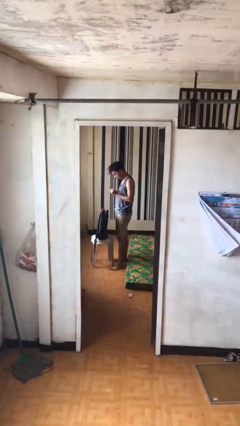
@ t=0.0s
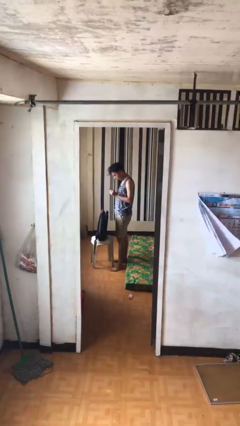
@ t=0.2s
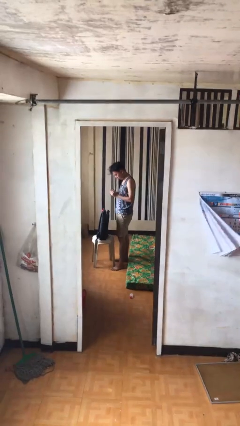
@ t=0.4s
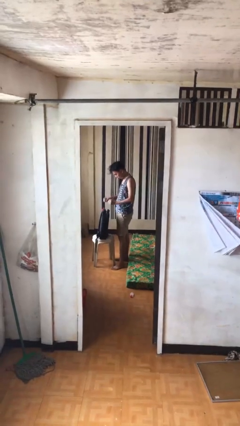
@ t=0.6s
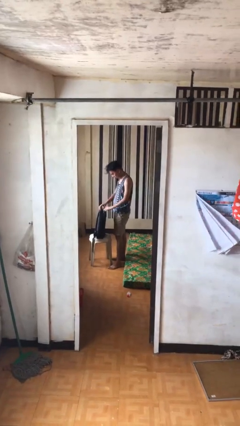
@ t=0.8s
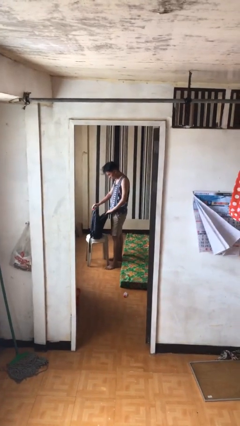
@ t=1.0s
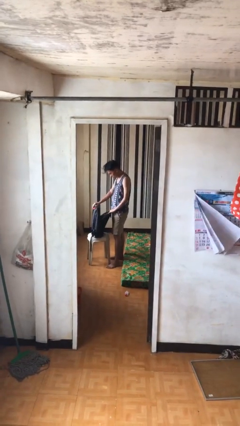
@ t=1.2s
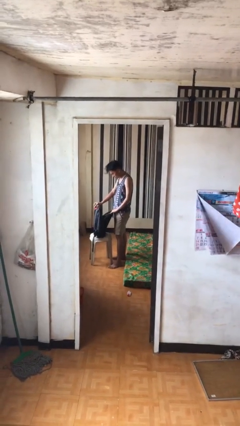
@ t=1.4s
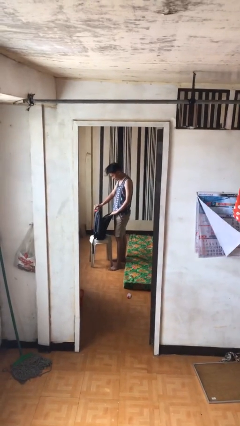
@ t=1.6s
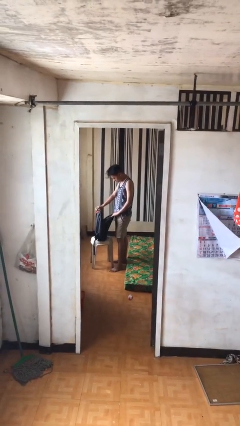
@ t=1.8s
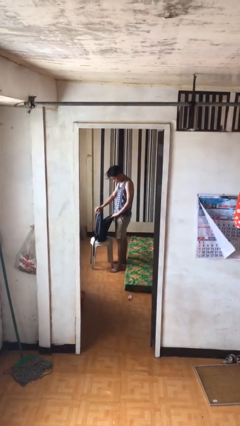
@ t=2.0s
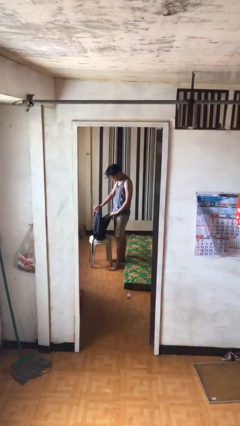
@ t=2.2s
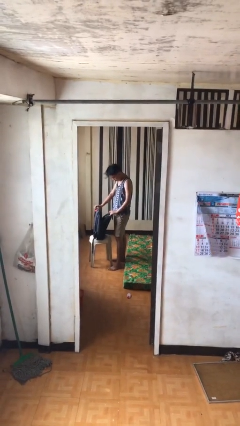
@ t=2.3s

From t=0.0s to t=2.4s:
person searches in backpack

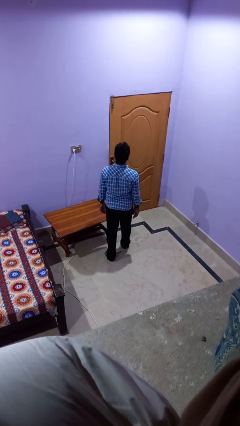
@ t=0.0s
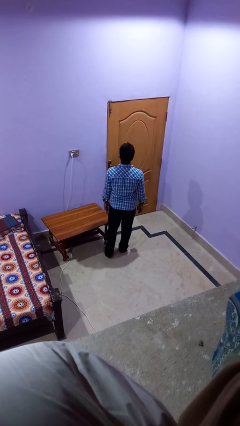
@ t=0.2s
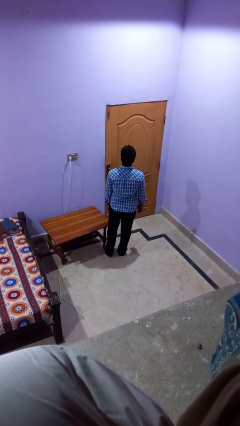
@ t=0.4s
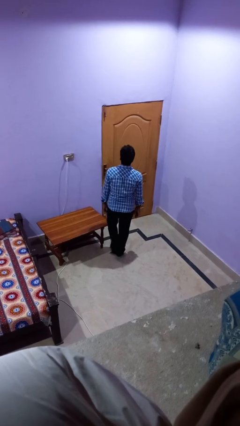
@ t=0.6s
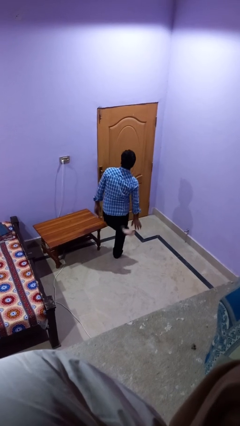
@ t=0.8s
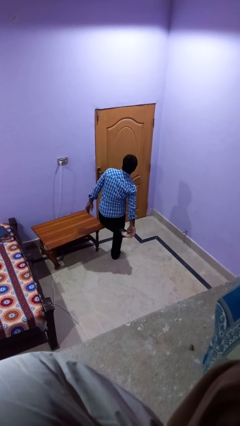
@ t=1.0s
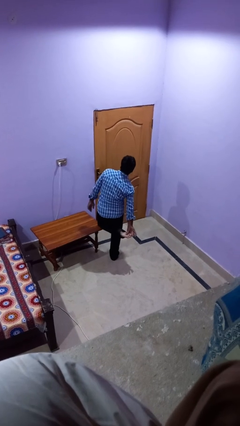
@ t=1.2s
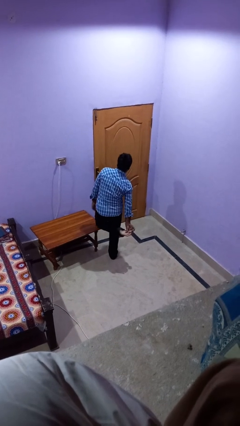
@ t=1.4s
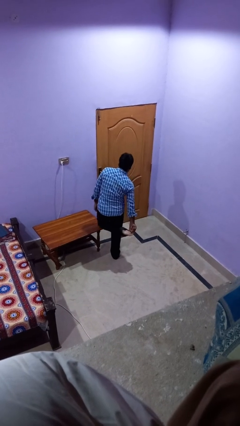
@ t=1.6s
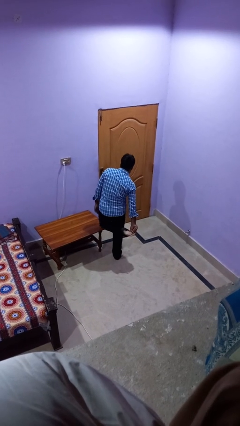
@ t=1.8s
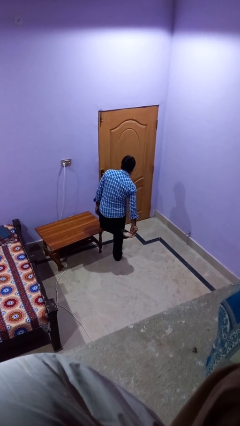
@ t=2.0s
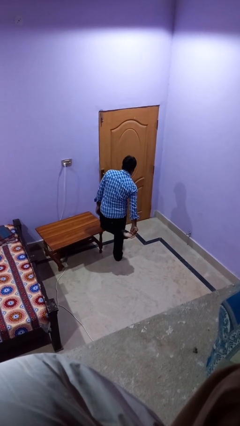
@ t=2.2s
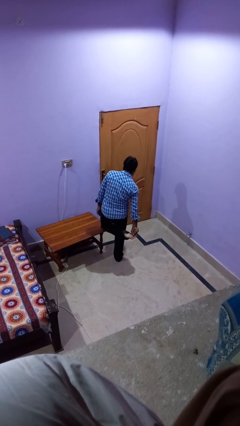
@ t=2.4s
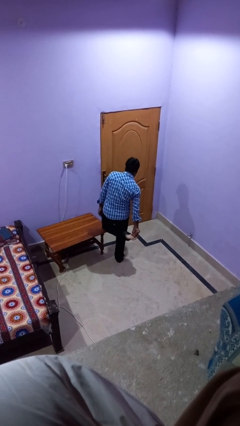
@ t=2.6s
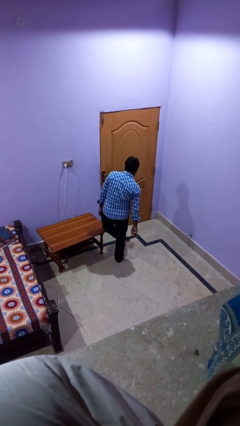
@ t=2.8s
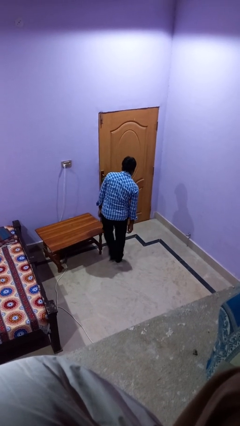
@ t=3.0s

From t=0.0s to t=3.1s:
person stubs toe

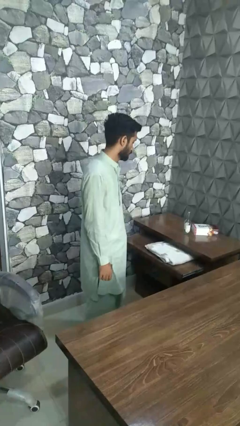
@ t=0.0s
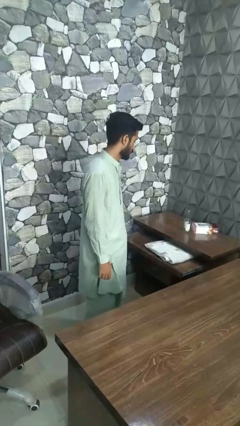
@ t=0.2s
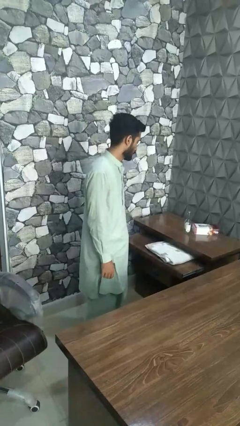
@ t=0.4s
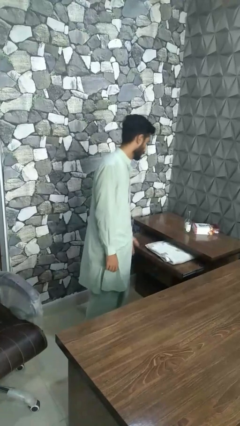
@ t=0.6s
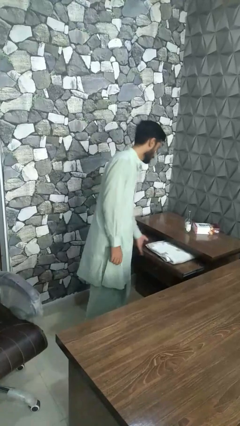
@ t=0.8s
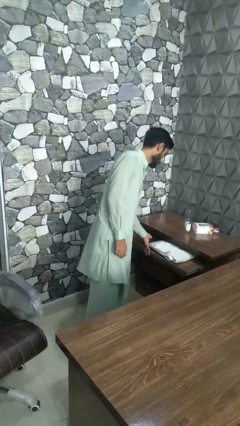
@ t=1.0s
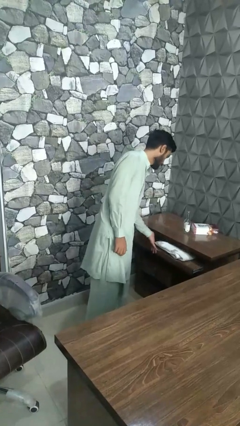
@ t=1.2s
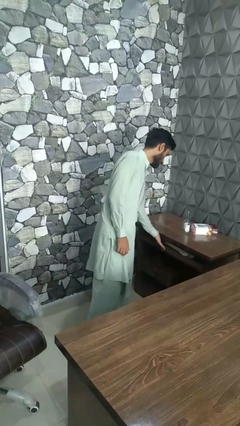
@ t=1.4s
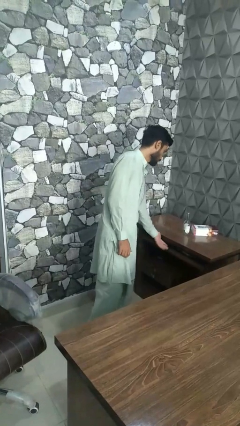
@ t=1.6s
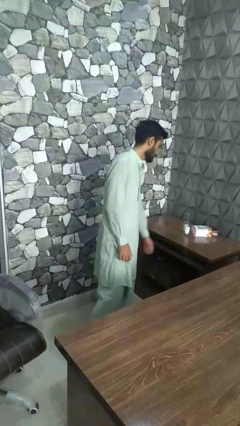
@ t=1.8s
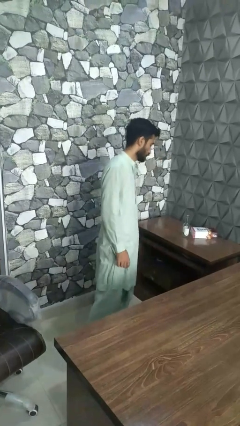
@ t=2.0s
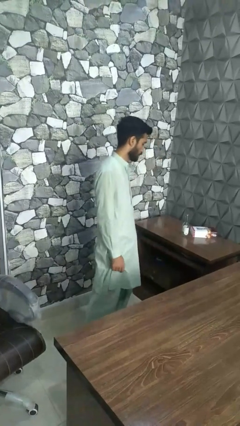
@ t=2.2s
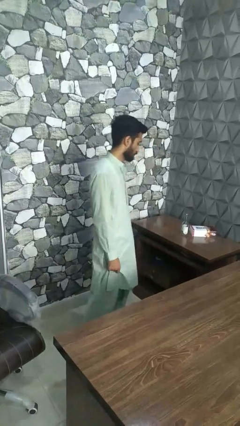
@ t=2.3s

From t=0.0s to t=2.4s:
person closes dresser drawer

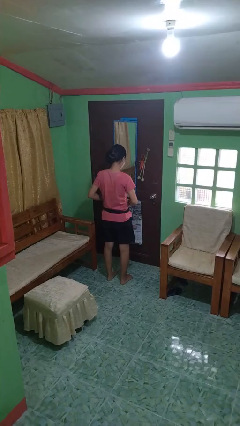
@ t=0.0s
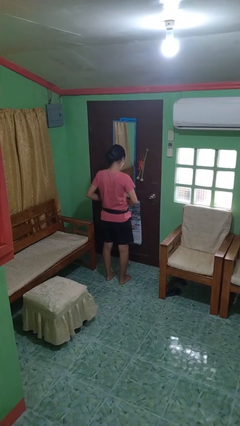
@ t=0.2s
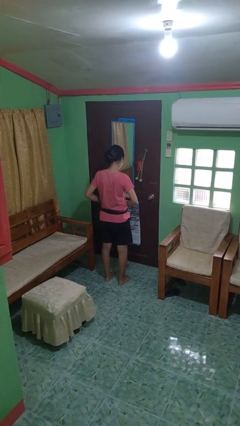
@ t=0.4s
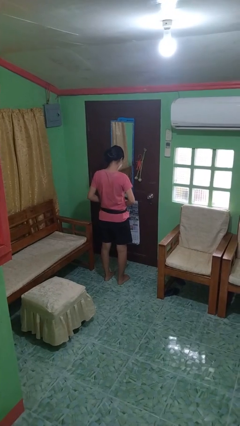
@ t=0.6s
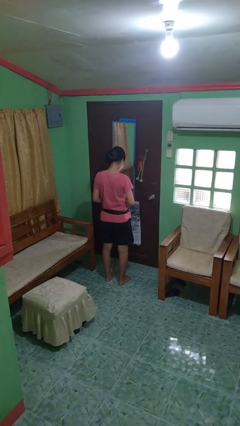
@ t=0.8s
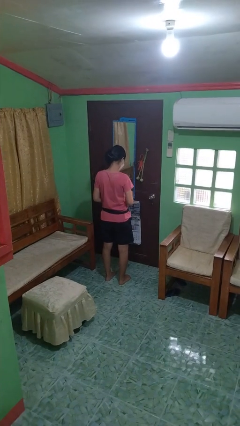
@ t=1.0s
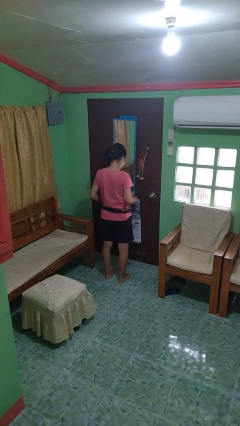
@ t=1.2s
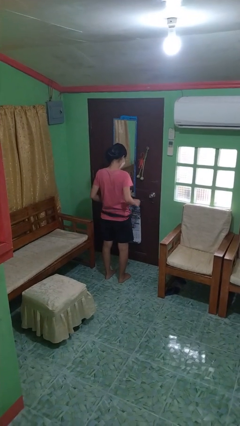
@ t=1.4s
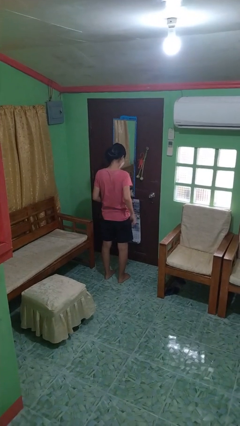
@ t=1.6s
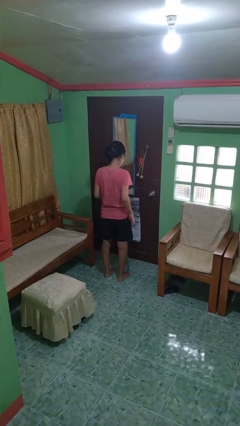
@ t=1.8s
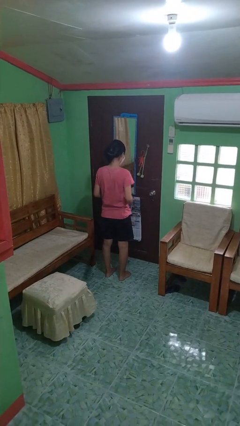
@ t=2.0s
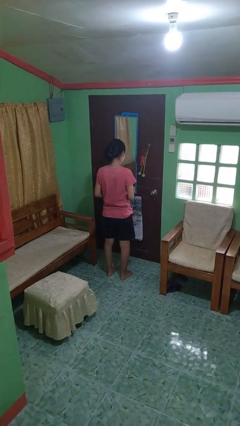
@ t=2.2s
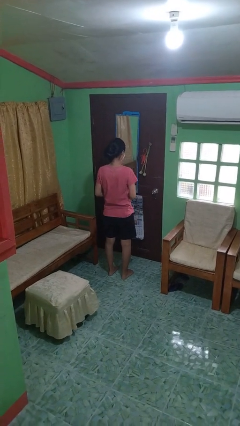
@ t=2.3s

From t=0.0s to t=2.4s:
person takes off belt

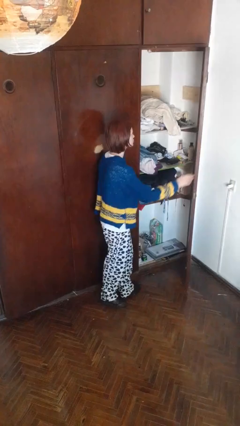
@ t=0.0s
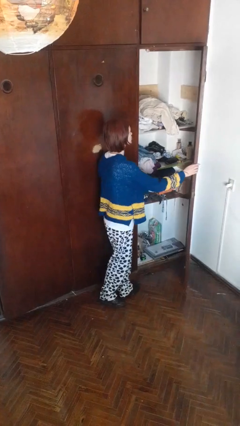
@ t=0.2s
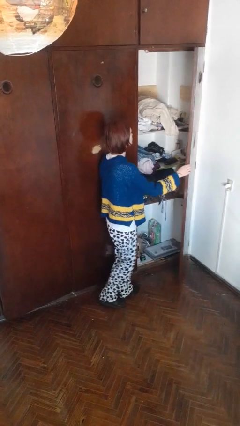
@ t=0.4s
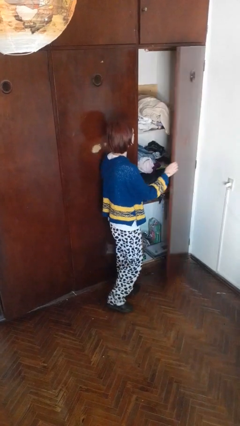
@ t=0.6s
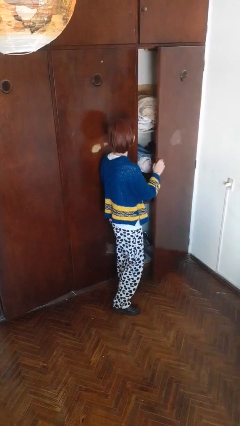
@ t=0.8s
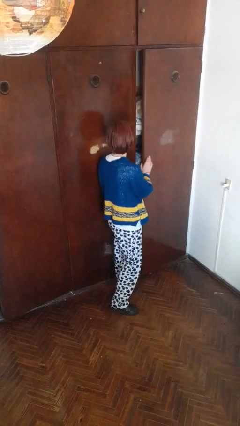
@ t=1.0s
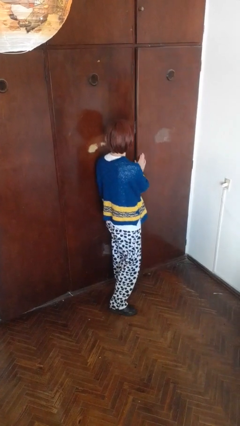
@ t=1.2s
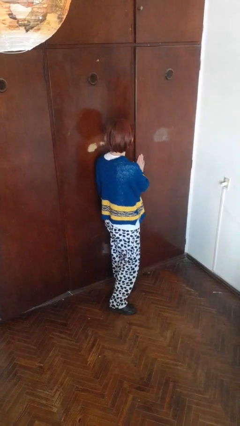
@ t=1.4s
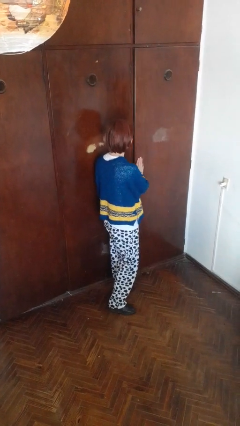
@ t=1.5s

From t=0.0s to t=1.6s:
person closes closet door

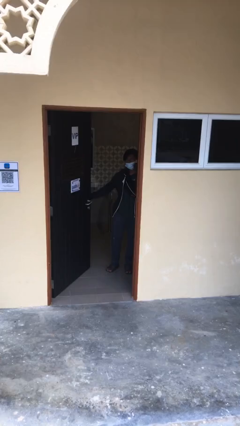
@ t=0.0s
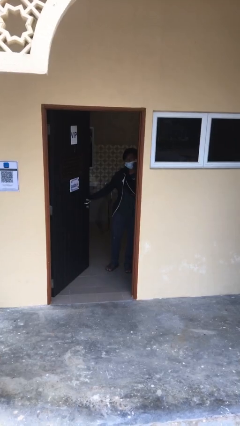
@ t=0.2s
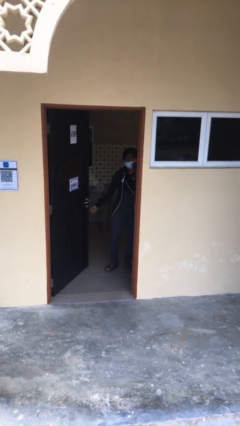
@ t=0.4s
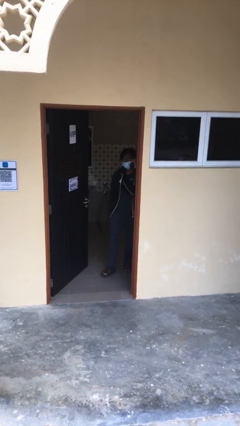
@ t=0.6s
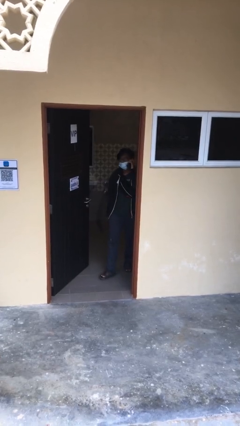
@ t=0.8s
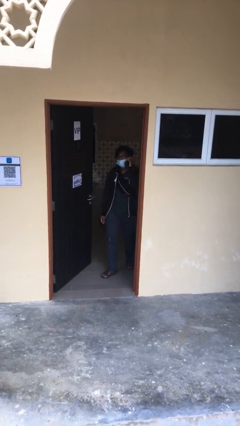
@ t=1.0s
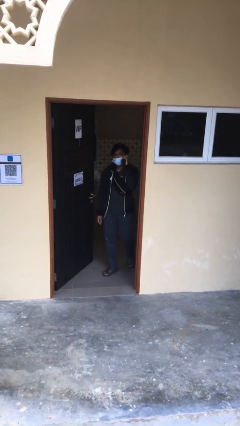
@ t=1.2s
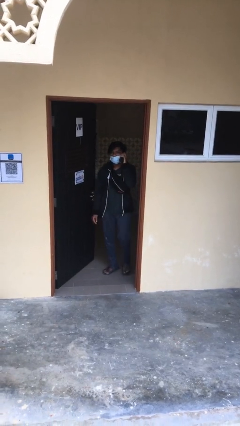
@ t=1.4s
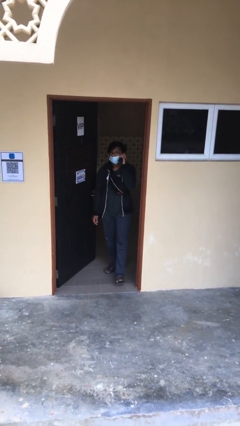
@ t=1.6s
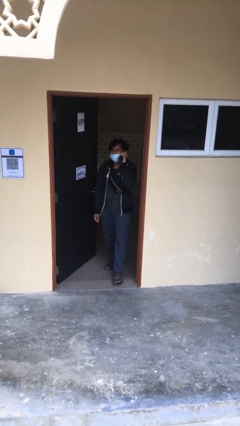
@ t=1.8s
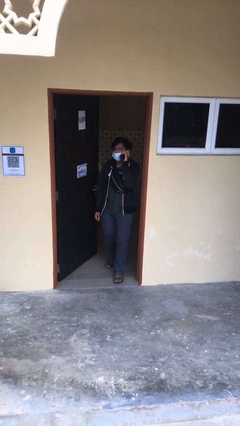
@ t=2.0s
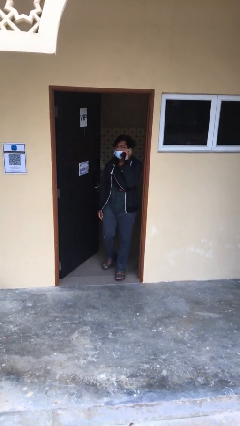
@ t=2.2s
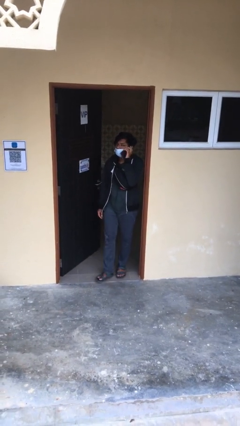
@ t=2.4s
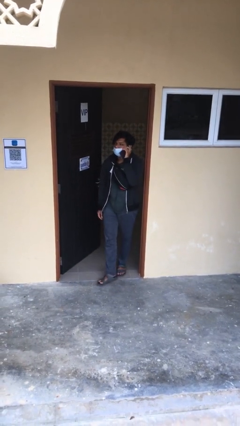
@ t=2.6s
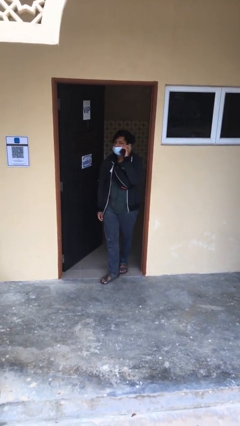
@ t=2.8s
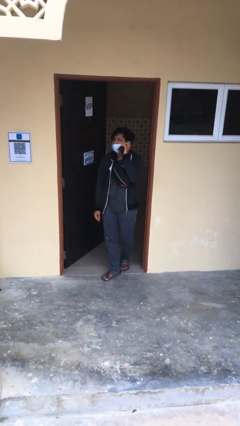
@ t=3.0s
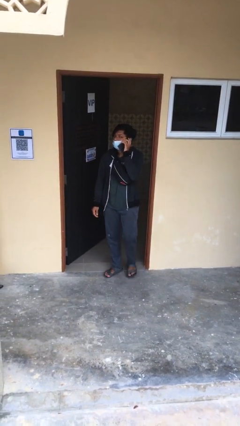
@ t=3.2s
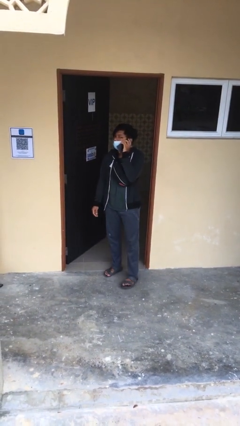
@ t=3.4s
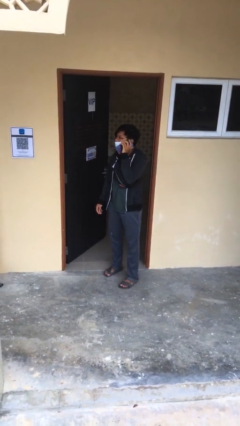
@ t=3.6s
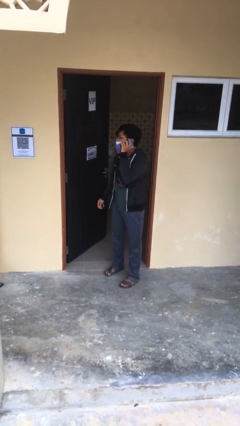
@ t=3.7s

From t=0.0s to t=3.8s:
person enters scene through structure

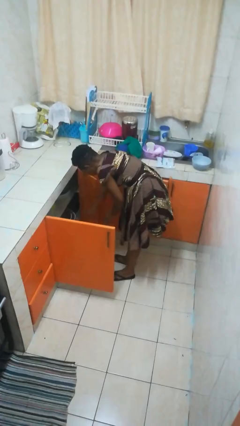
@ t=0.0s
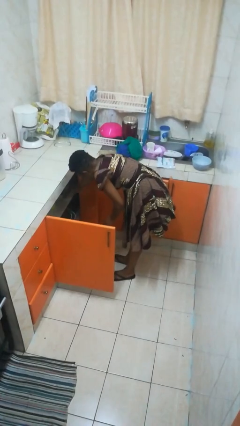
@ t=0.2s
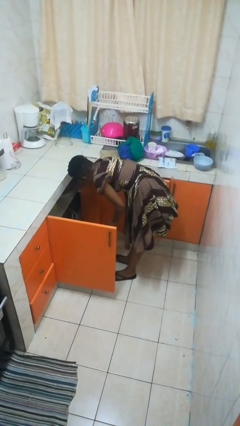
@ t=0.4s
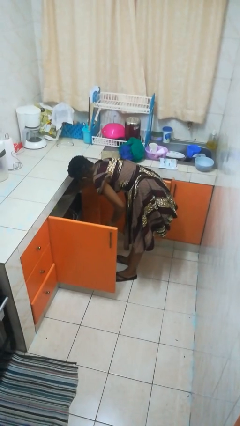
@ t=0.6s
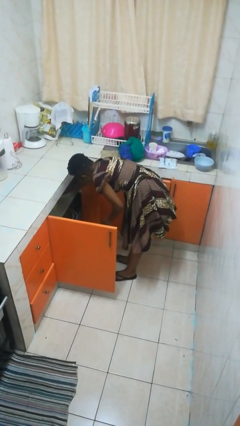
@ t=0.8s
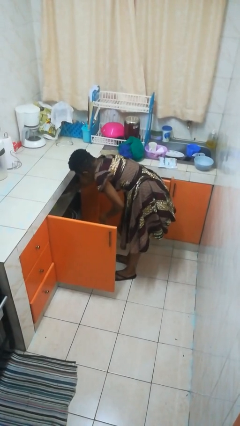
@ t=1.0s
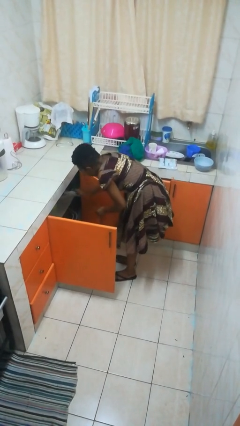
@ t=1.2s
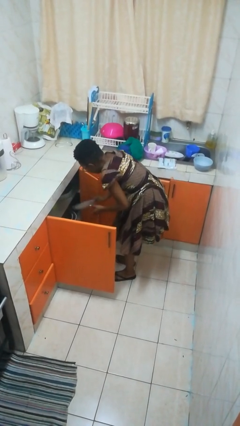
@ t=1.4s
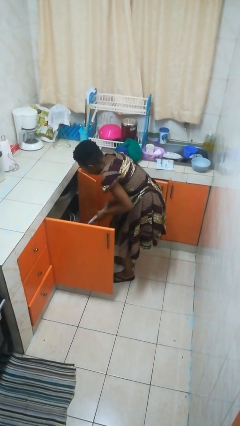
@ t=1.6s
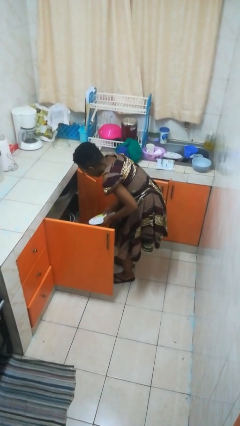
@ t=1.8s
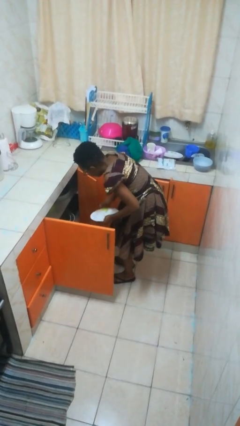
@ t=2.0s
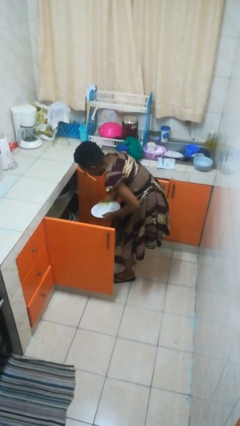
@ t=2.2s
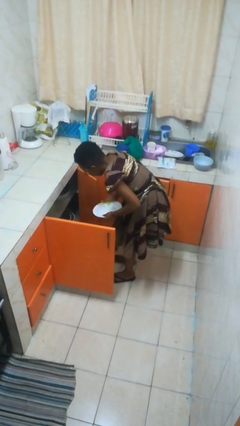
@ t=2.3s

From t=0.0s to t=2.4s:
person takes object from cabinet
